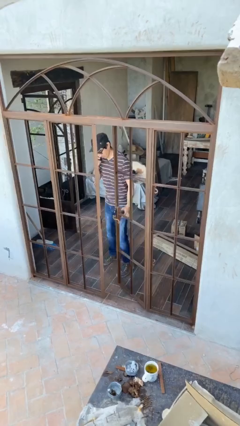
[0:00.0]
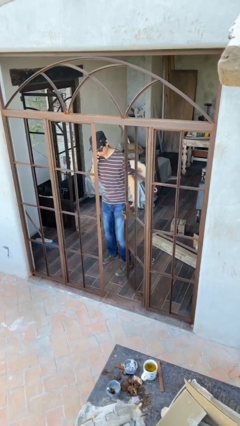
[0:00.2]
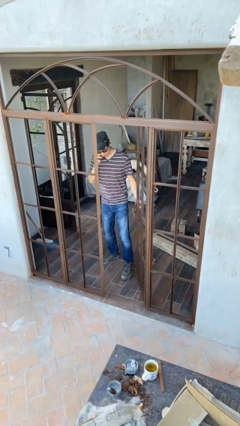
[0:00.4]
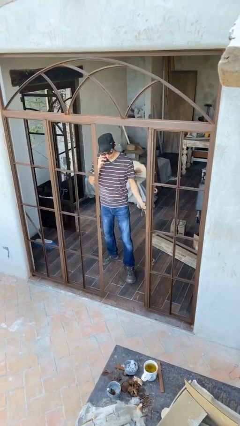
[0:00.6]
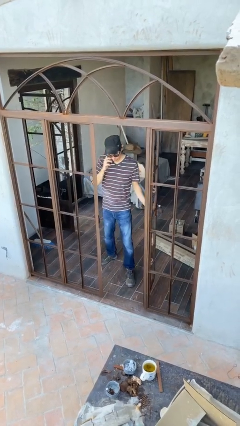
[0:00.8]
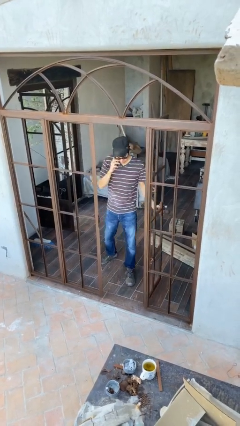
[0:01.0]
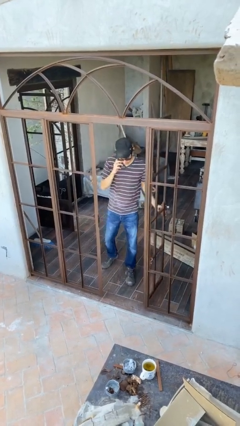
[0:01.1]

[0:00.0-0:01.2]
person opens facility door

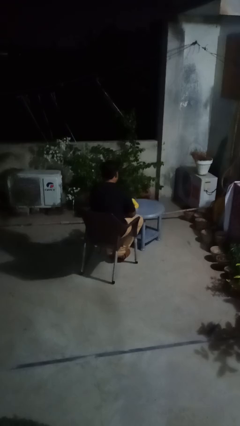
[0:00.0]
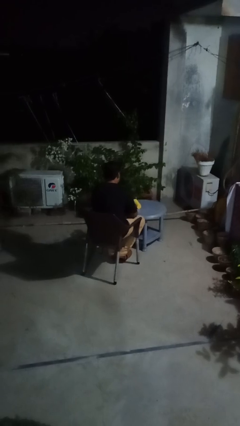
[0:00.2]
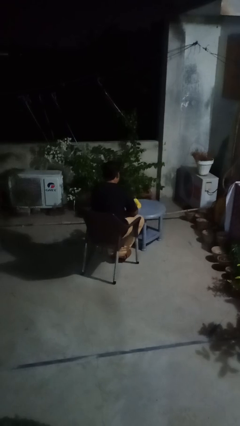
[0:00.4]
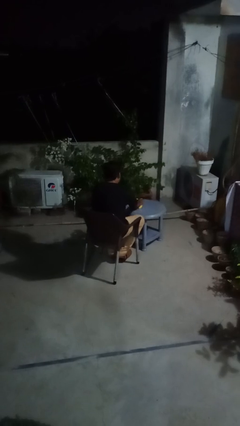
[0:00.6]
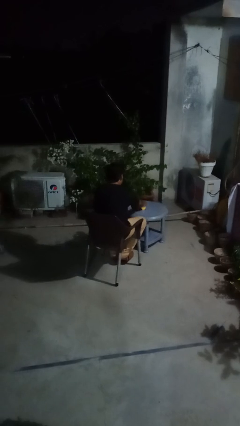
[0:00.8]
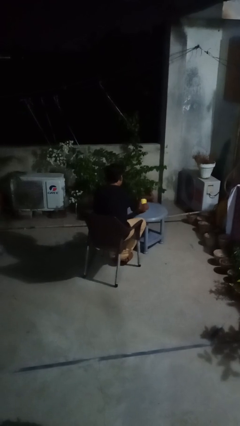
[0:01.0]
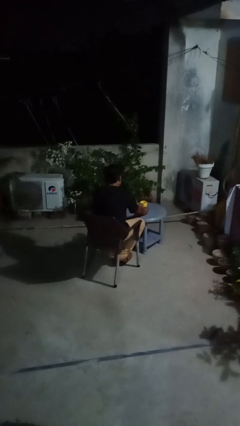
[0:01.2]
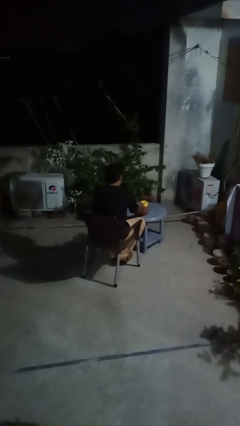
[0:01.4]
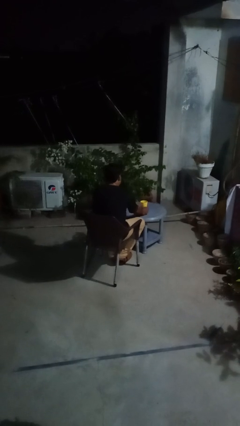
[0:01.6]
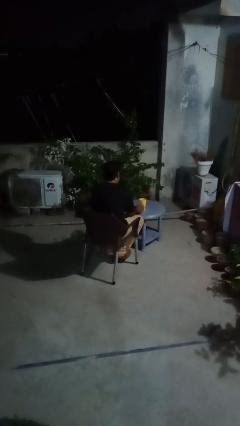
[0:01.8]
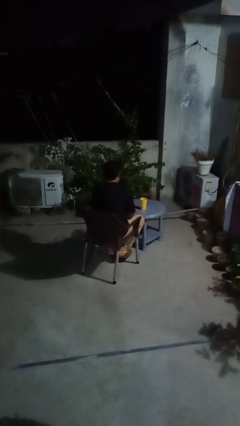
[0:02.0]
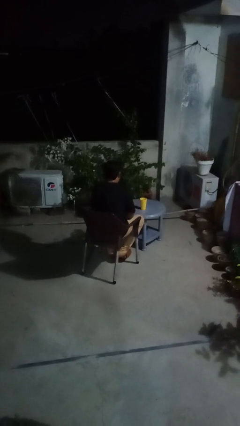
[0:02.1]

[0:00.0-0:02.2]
person sets upright glass

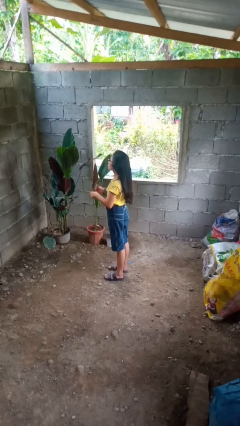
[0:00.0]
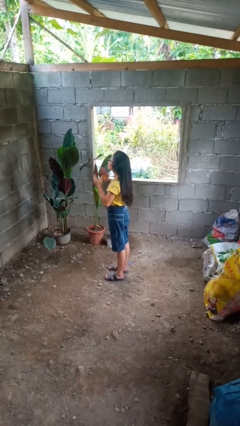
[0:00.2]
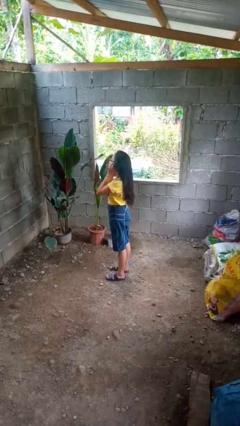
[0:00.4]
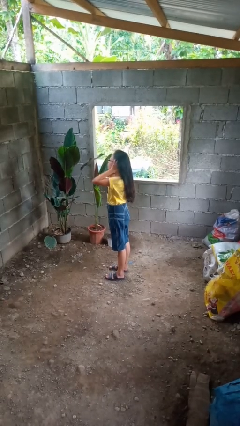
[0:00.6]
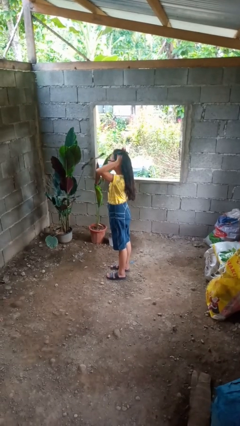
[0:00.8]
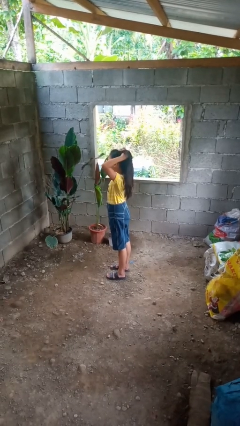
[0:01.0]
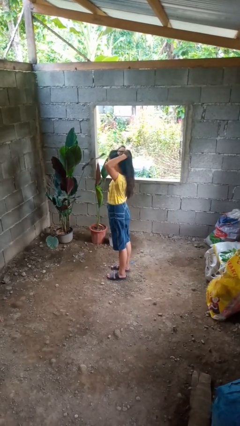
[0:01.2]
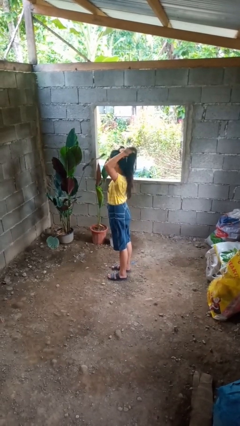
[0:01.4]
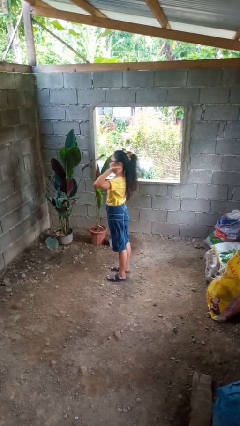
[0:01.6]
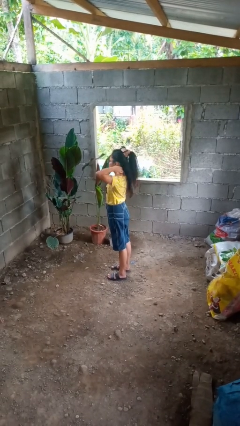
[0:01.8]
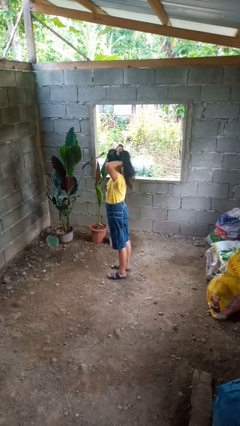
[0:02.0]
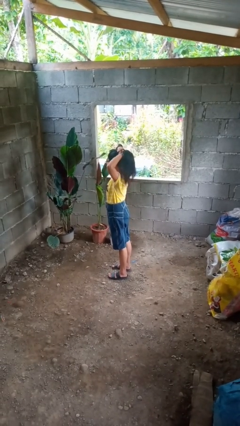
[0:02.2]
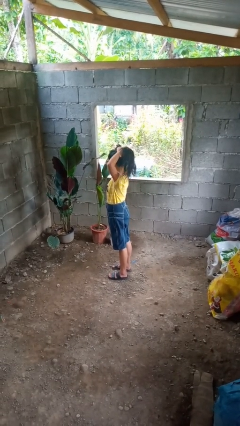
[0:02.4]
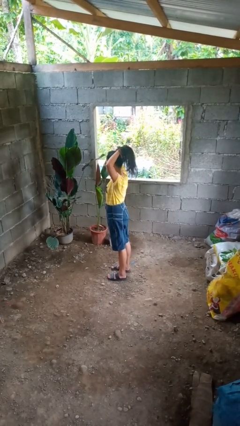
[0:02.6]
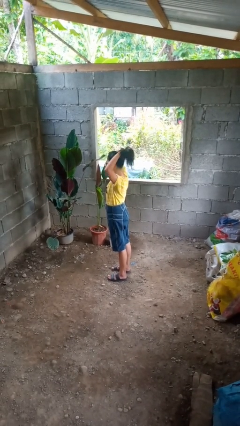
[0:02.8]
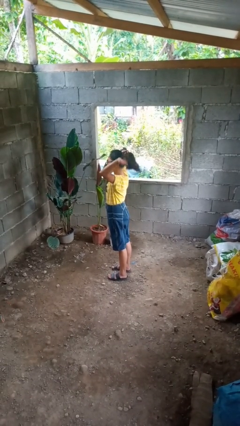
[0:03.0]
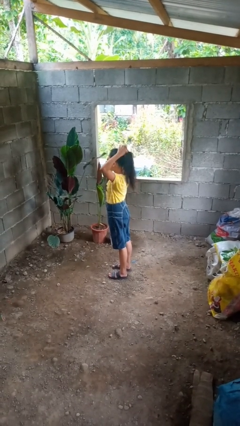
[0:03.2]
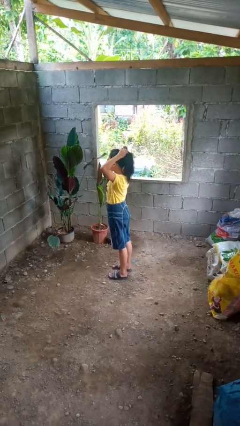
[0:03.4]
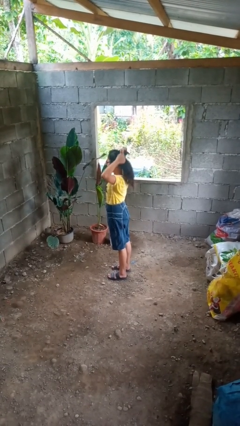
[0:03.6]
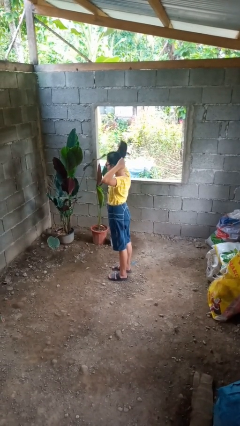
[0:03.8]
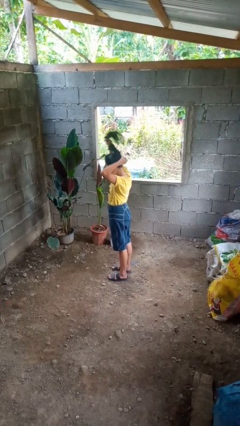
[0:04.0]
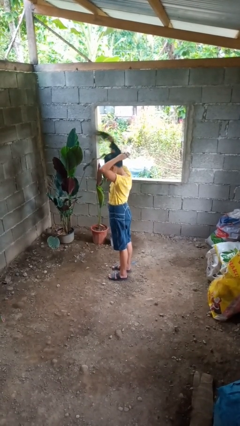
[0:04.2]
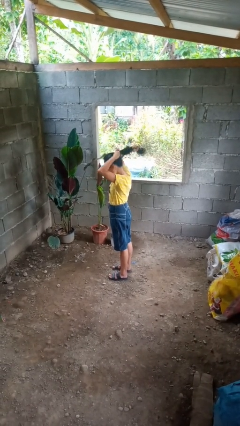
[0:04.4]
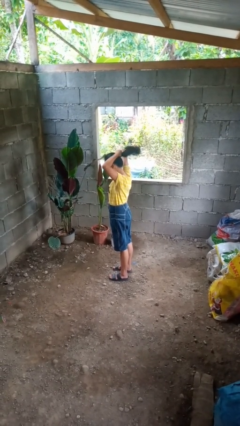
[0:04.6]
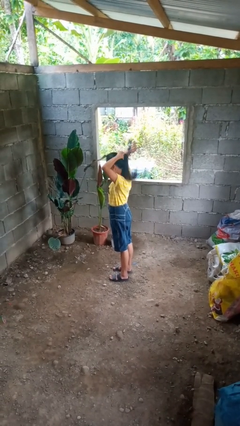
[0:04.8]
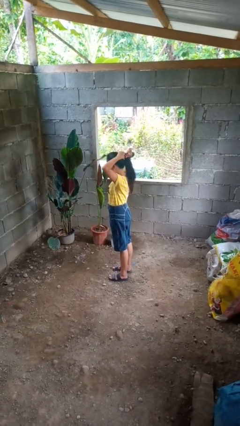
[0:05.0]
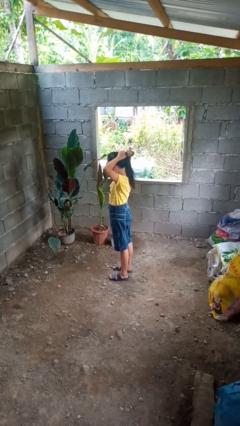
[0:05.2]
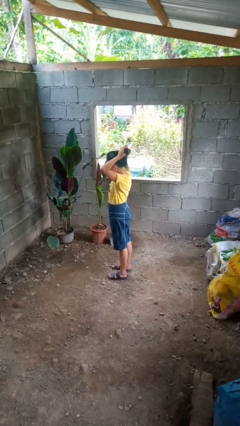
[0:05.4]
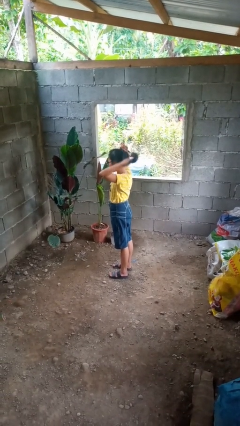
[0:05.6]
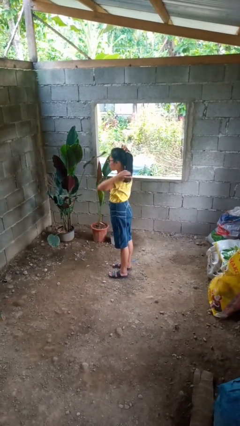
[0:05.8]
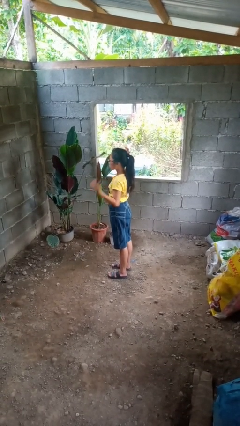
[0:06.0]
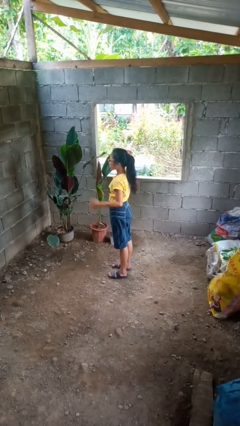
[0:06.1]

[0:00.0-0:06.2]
person puts hair in ponytail

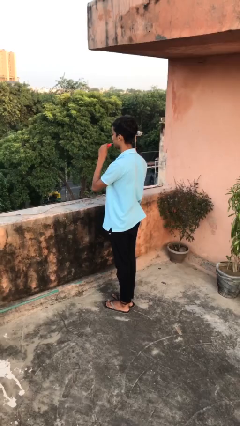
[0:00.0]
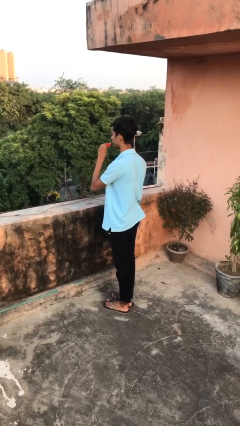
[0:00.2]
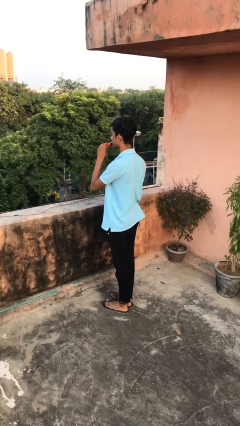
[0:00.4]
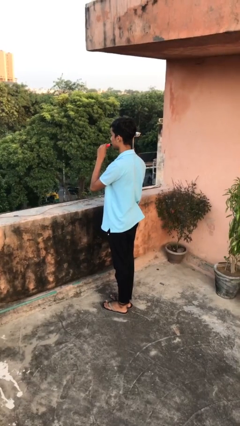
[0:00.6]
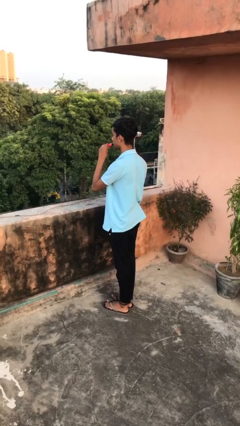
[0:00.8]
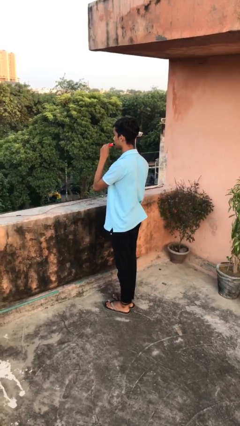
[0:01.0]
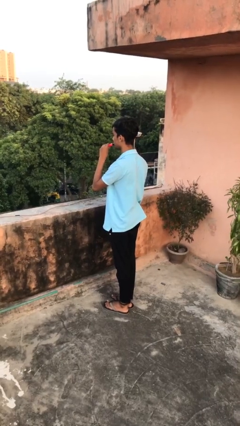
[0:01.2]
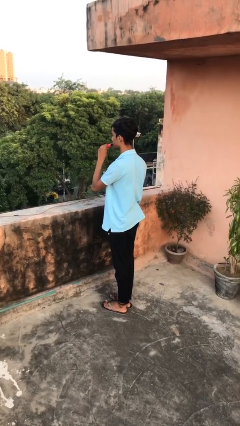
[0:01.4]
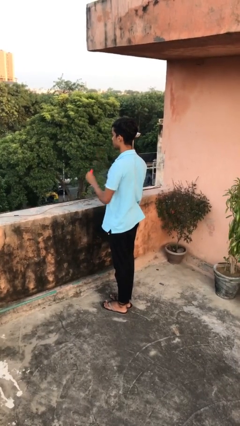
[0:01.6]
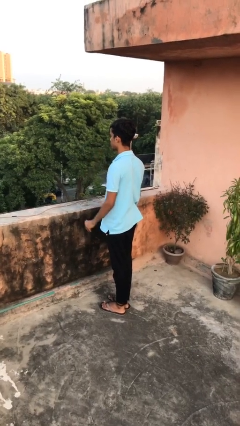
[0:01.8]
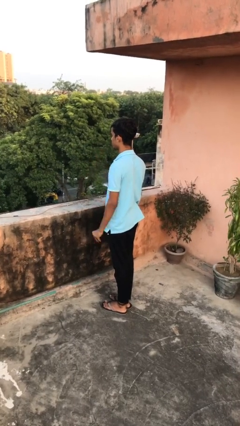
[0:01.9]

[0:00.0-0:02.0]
person vapes

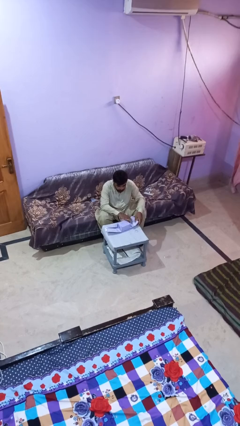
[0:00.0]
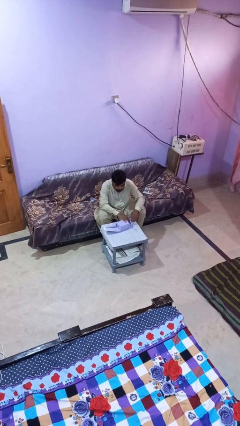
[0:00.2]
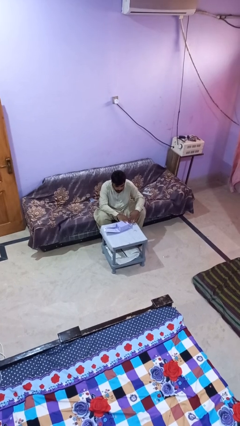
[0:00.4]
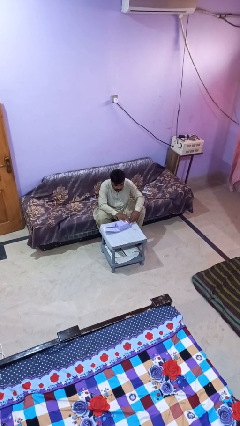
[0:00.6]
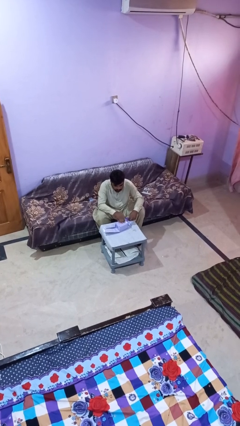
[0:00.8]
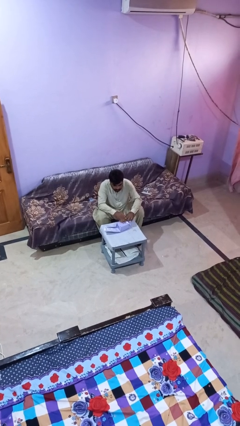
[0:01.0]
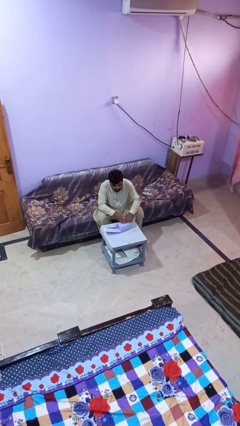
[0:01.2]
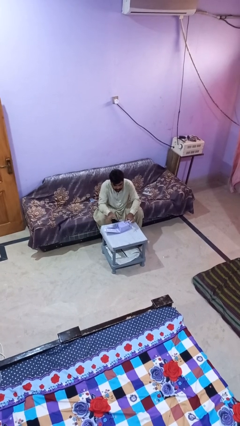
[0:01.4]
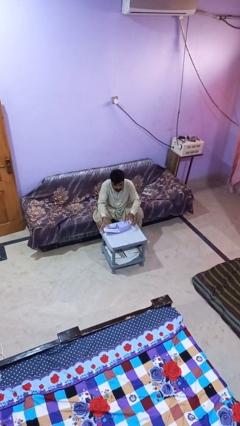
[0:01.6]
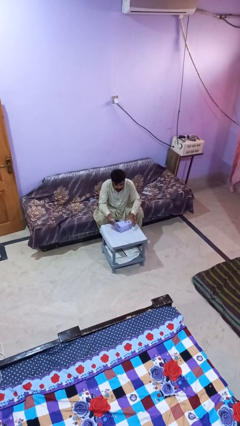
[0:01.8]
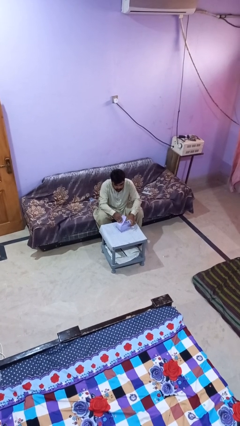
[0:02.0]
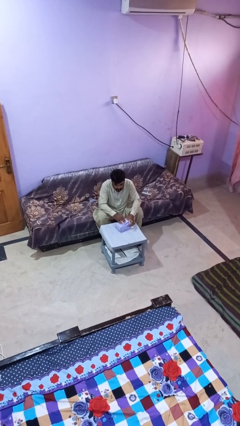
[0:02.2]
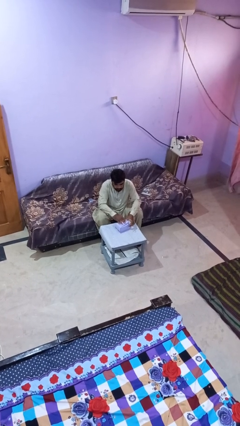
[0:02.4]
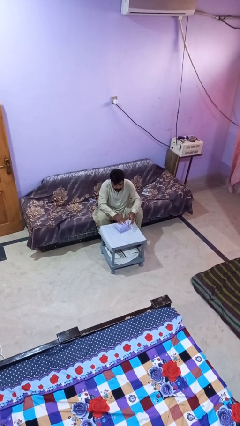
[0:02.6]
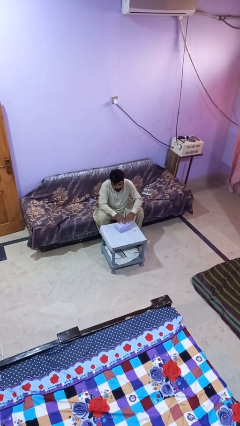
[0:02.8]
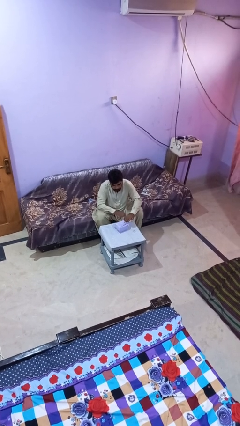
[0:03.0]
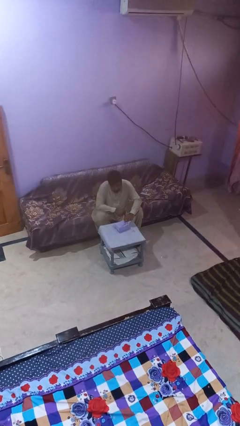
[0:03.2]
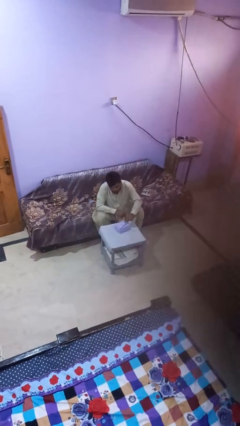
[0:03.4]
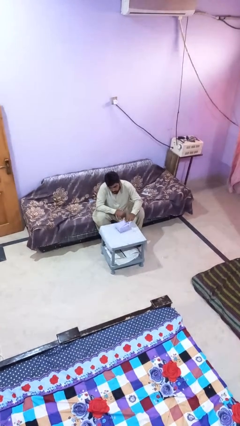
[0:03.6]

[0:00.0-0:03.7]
person wraps box

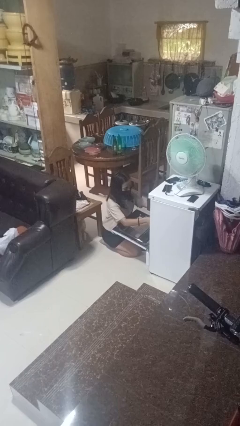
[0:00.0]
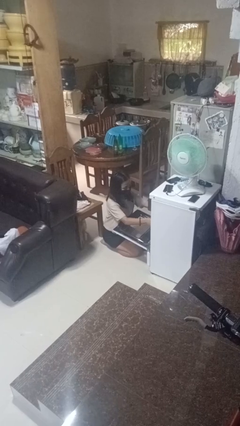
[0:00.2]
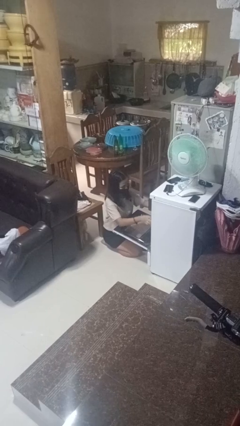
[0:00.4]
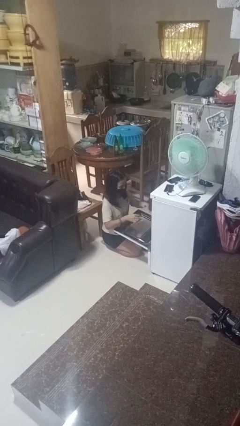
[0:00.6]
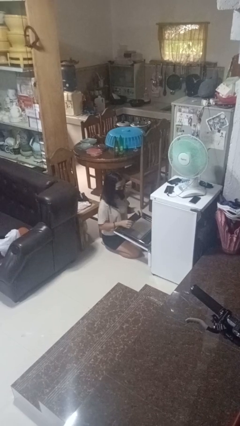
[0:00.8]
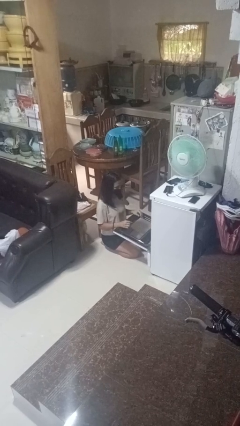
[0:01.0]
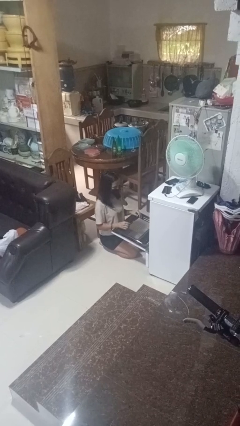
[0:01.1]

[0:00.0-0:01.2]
person puts object into oven

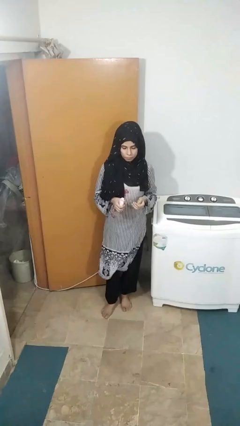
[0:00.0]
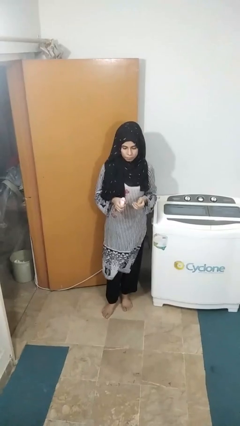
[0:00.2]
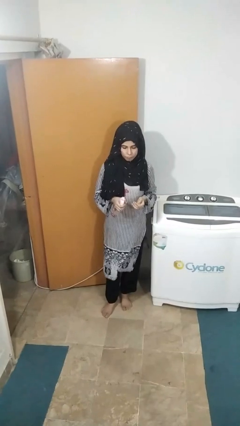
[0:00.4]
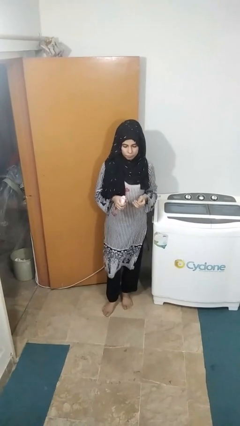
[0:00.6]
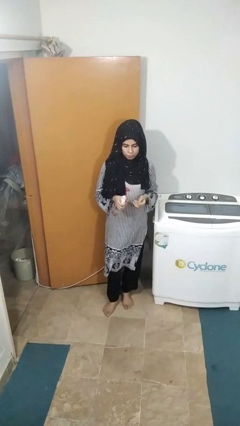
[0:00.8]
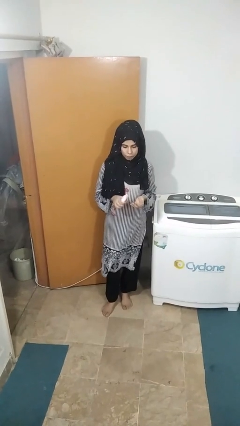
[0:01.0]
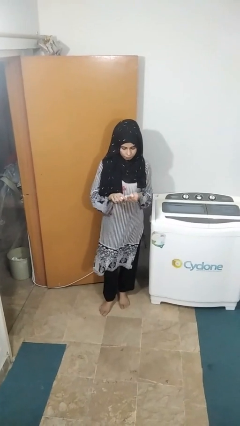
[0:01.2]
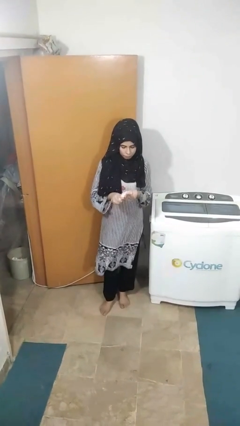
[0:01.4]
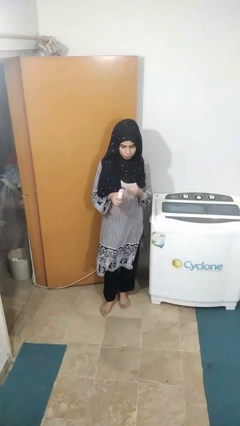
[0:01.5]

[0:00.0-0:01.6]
person extinguishes candle
